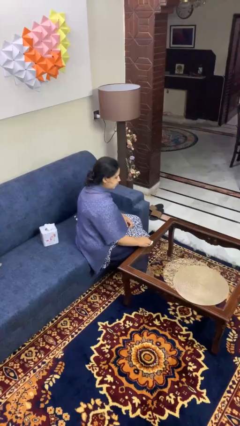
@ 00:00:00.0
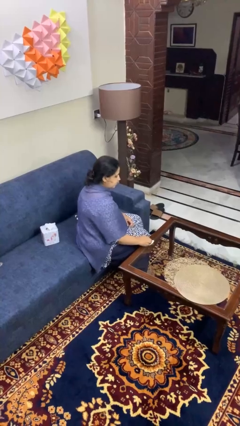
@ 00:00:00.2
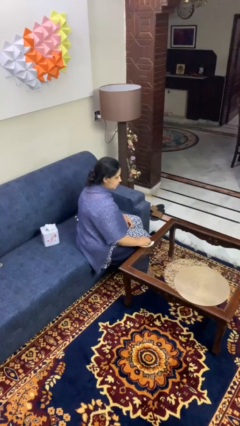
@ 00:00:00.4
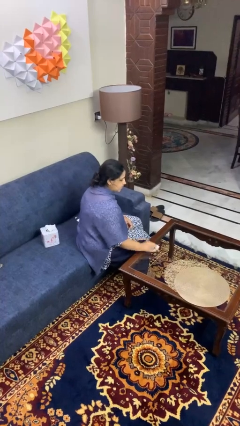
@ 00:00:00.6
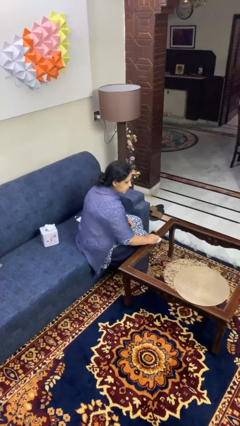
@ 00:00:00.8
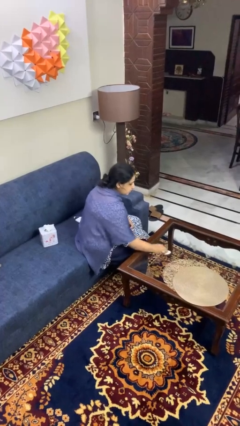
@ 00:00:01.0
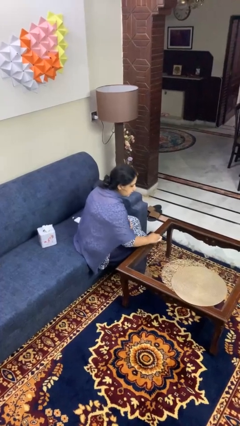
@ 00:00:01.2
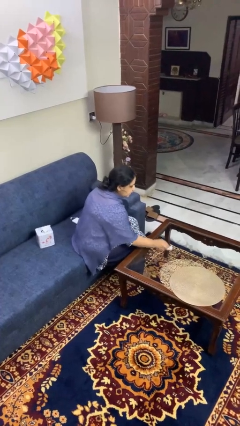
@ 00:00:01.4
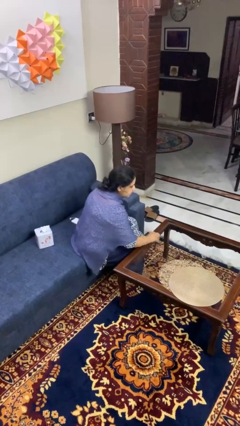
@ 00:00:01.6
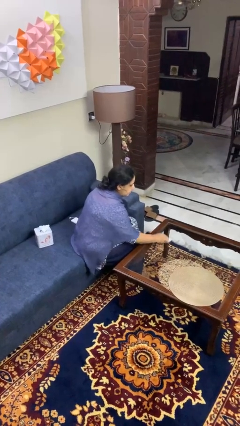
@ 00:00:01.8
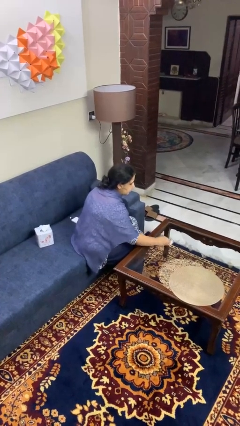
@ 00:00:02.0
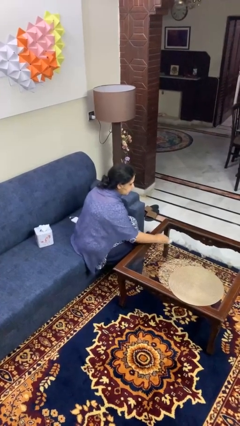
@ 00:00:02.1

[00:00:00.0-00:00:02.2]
person cleans table with rag

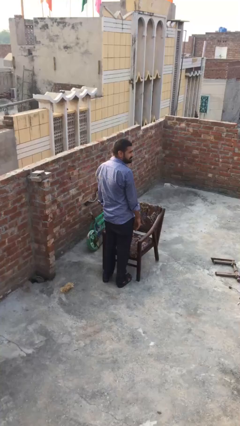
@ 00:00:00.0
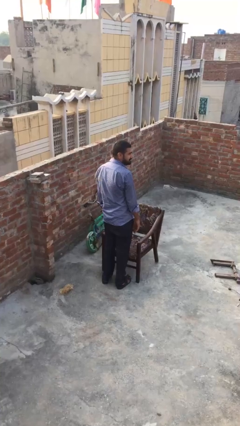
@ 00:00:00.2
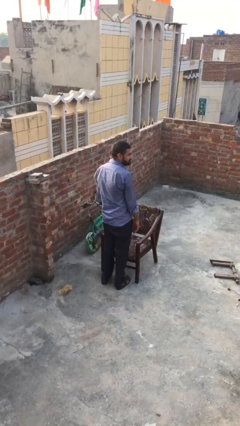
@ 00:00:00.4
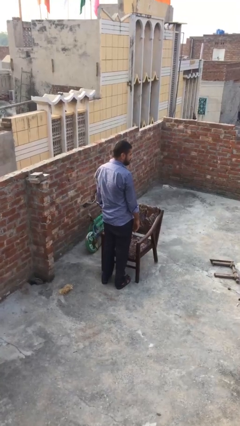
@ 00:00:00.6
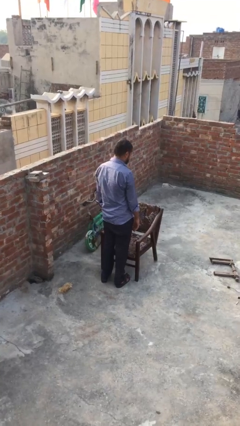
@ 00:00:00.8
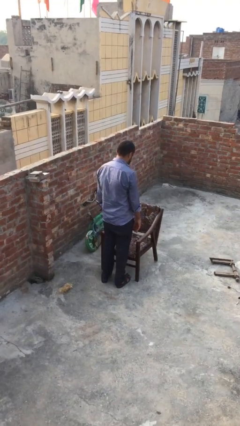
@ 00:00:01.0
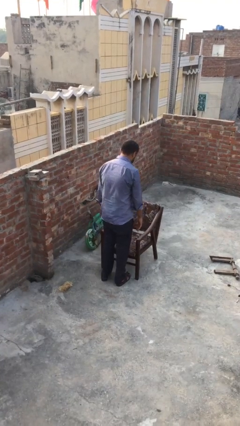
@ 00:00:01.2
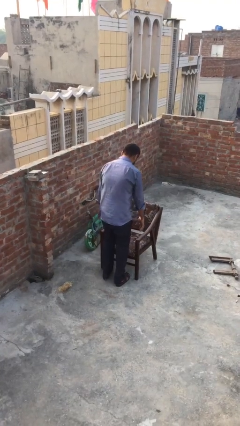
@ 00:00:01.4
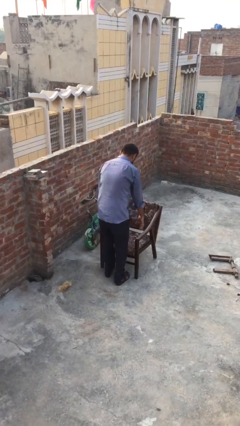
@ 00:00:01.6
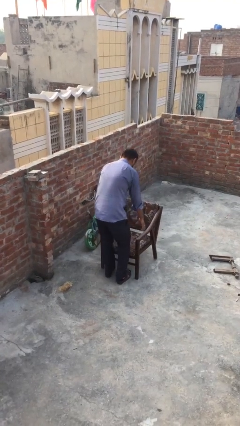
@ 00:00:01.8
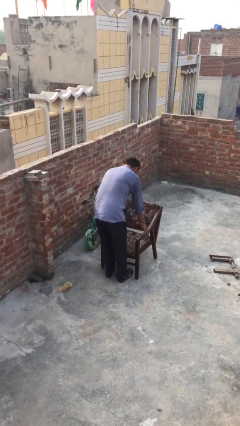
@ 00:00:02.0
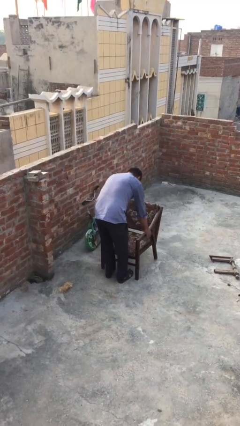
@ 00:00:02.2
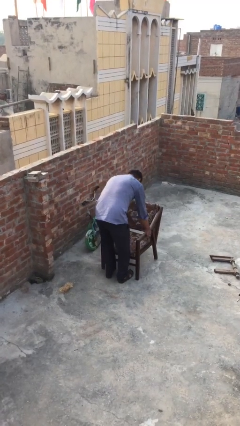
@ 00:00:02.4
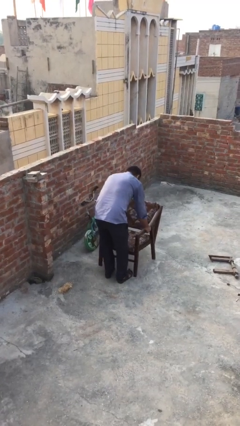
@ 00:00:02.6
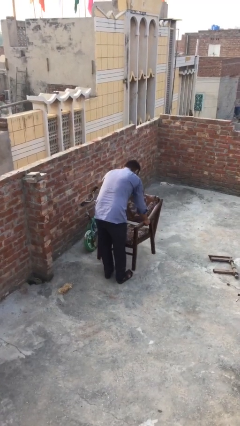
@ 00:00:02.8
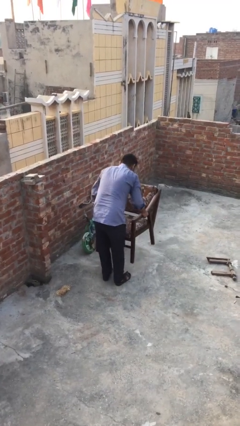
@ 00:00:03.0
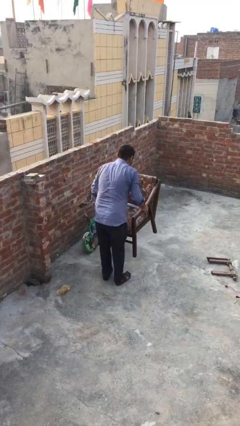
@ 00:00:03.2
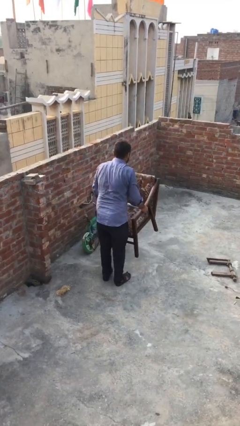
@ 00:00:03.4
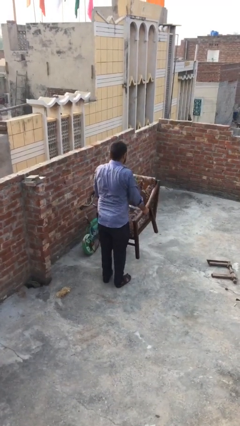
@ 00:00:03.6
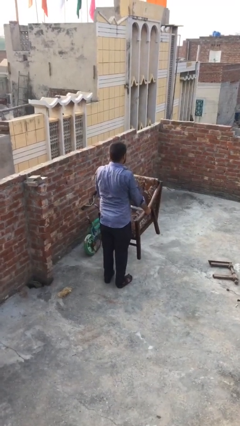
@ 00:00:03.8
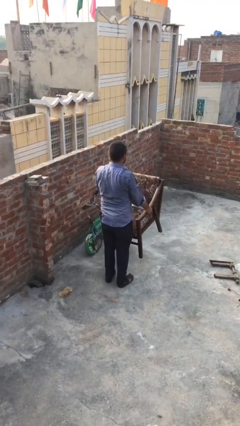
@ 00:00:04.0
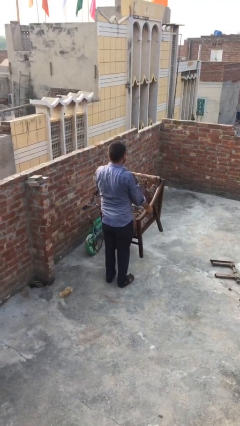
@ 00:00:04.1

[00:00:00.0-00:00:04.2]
person picks up object from floor

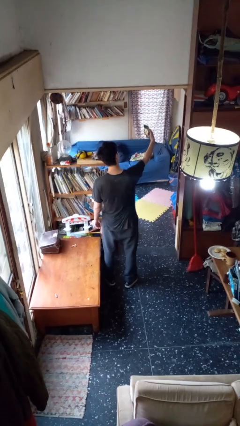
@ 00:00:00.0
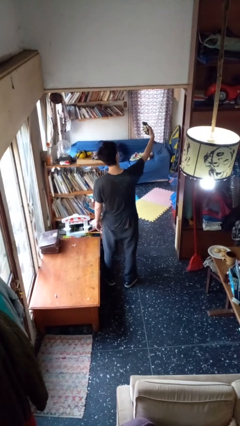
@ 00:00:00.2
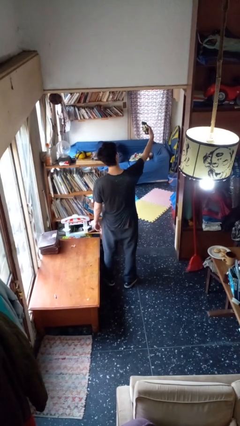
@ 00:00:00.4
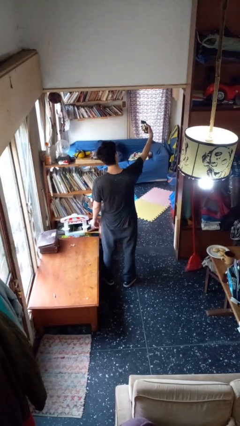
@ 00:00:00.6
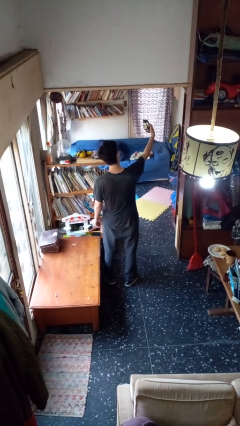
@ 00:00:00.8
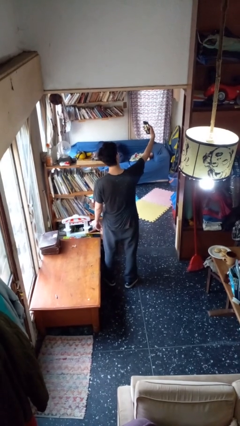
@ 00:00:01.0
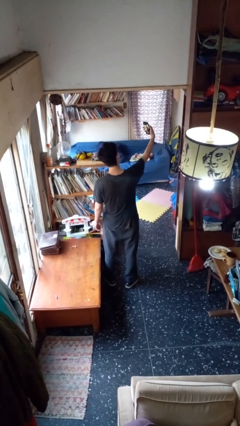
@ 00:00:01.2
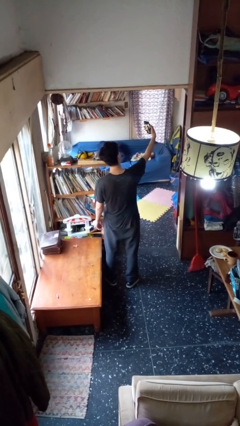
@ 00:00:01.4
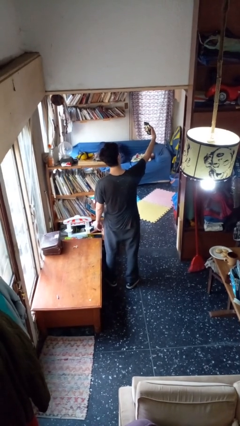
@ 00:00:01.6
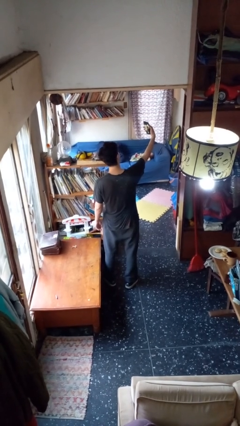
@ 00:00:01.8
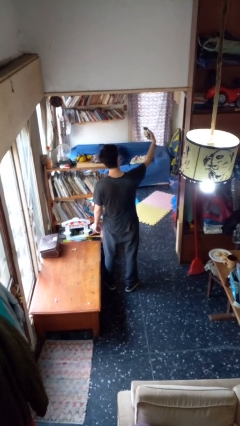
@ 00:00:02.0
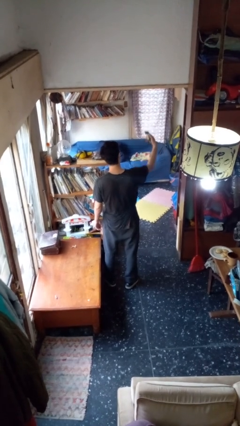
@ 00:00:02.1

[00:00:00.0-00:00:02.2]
person takes selfie

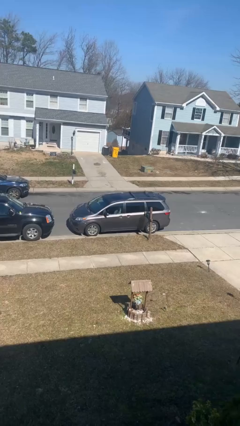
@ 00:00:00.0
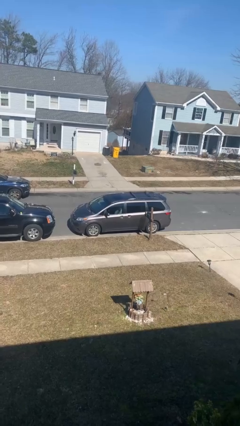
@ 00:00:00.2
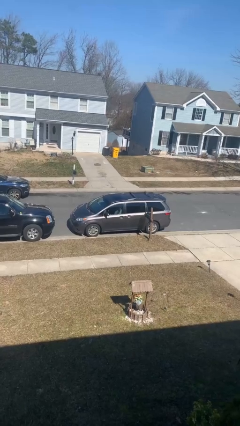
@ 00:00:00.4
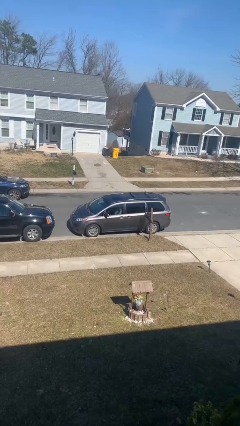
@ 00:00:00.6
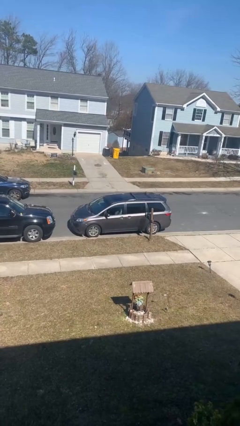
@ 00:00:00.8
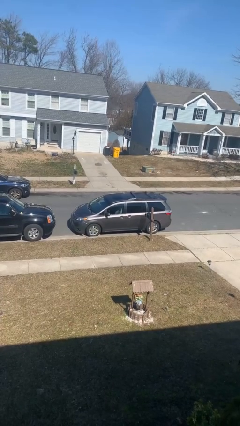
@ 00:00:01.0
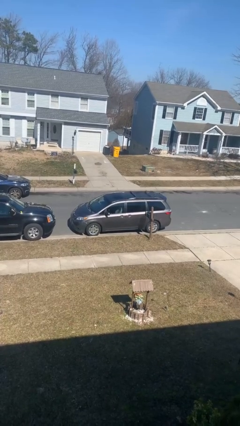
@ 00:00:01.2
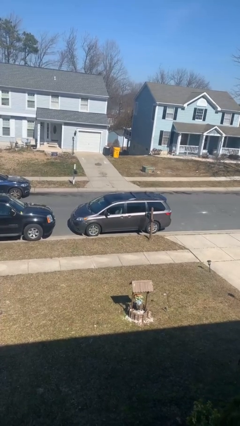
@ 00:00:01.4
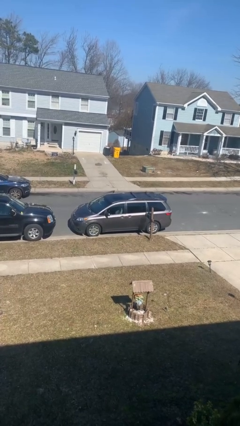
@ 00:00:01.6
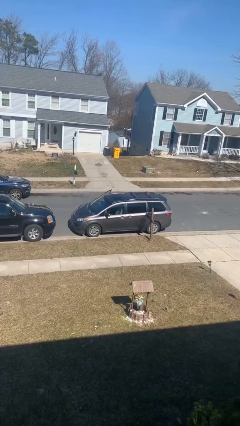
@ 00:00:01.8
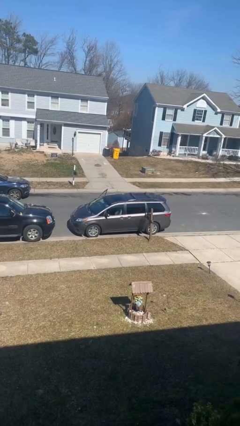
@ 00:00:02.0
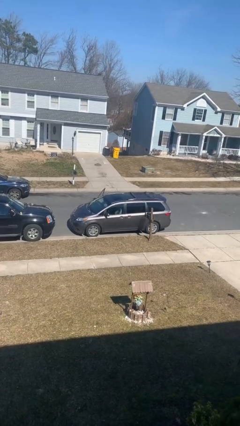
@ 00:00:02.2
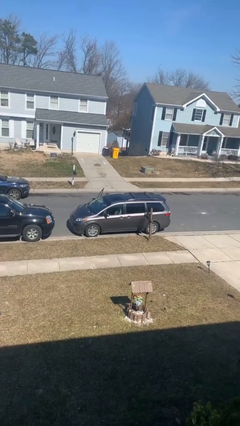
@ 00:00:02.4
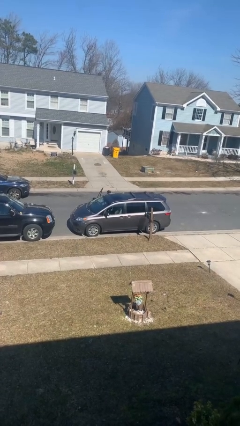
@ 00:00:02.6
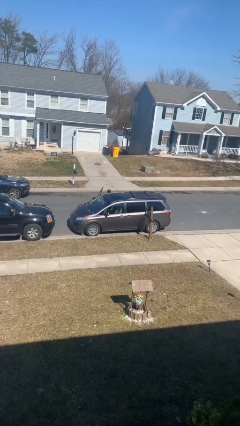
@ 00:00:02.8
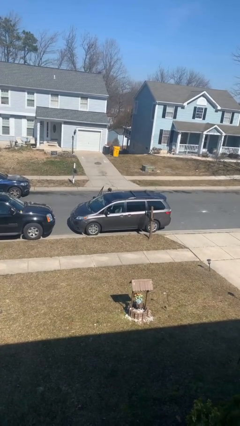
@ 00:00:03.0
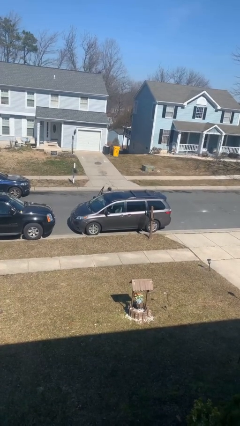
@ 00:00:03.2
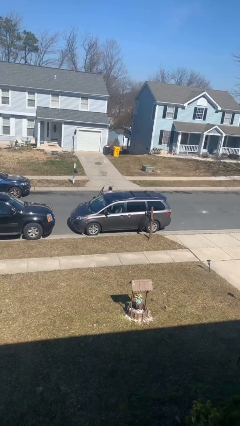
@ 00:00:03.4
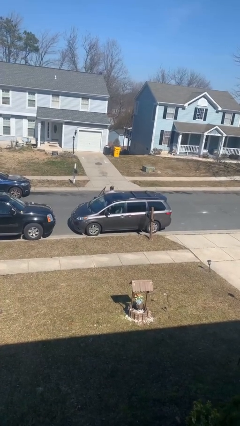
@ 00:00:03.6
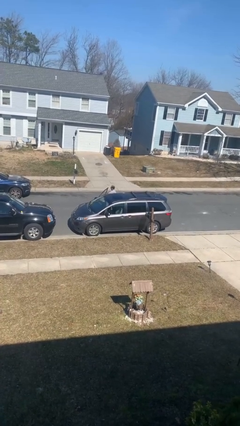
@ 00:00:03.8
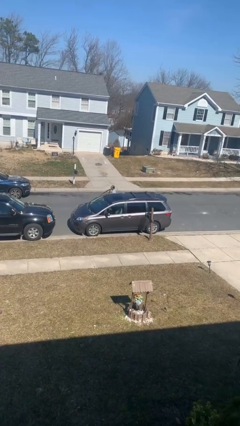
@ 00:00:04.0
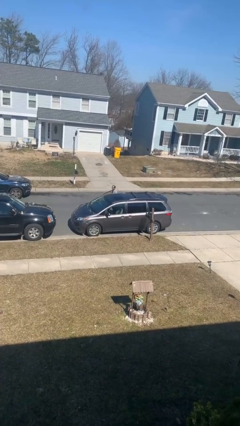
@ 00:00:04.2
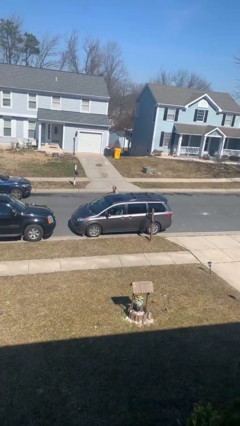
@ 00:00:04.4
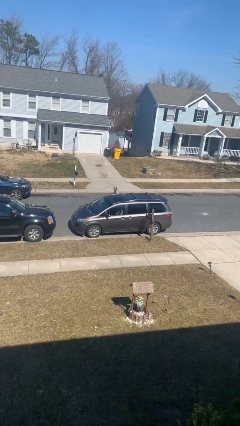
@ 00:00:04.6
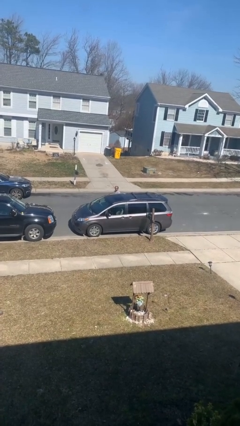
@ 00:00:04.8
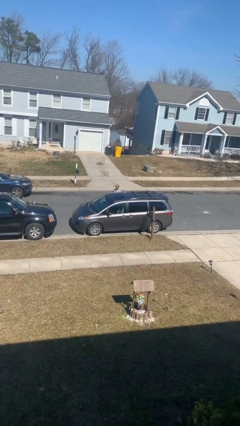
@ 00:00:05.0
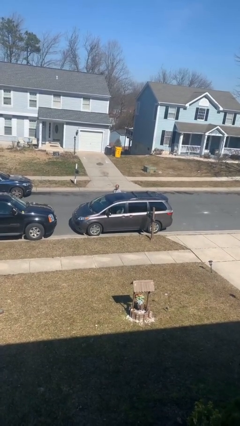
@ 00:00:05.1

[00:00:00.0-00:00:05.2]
car drops off person

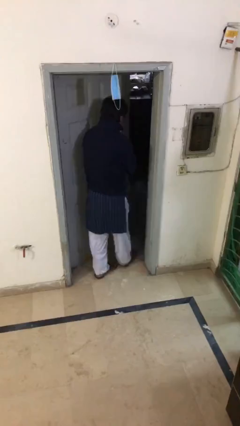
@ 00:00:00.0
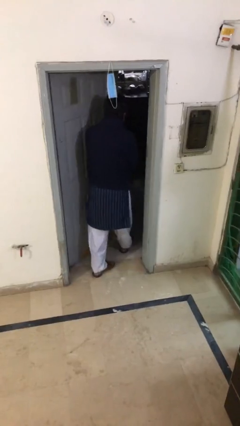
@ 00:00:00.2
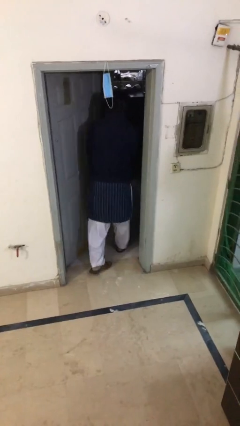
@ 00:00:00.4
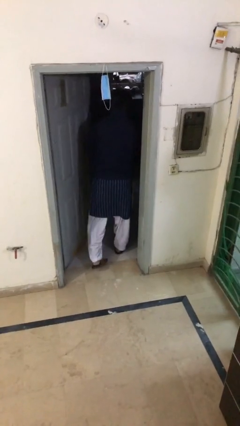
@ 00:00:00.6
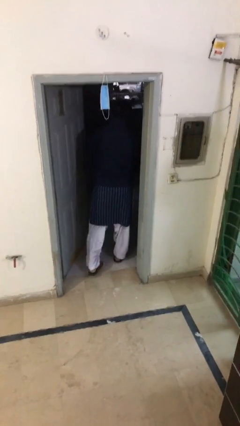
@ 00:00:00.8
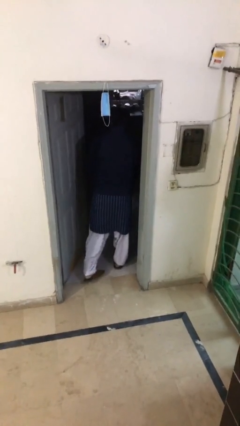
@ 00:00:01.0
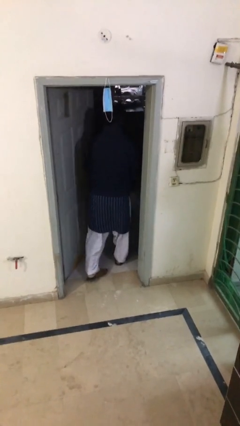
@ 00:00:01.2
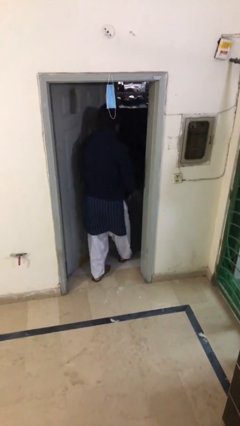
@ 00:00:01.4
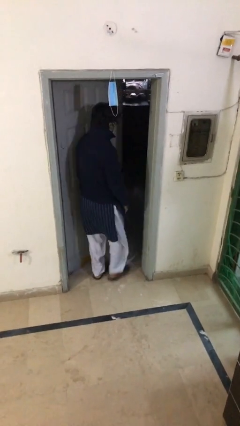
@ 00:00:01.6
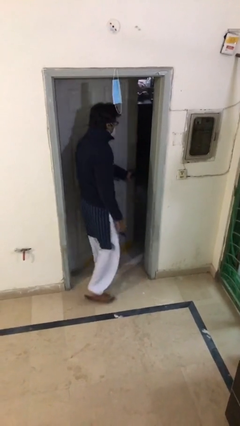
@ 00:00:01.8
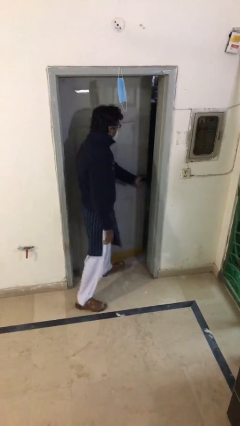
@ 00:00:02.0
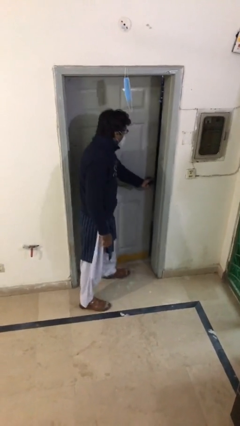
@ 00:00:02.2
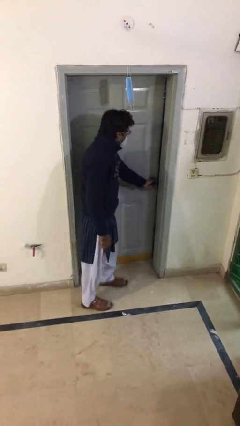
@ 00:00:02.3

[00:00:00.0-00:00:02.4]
person closes facility door

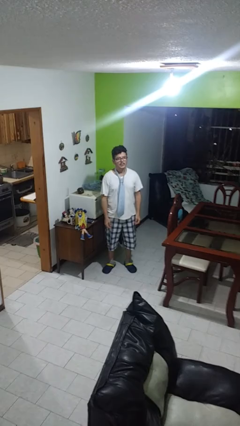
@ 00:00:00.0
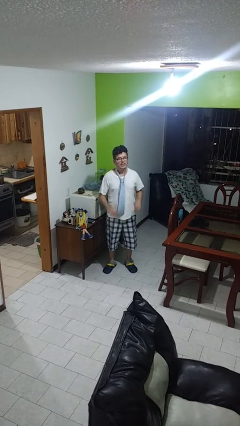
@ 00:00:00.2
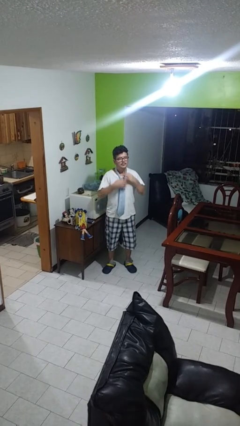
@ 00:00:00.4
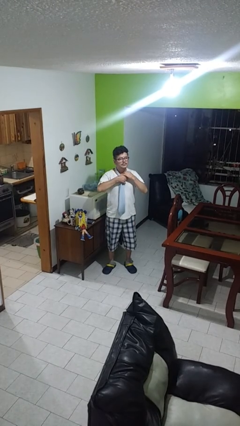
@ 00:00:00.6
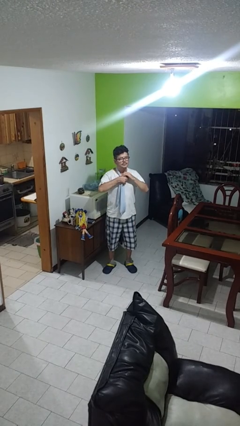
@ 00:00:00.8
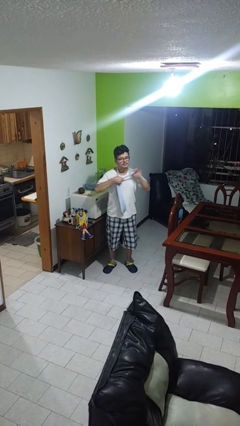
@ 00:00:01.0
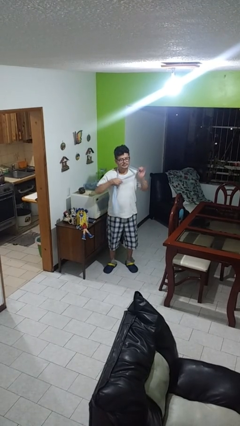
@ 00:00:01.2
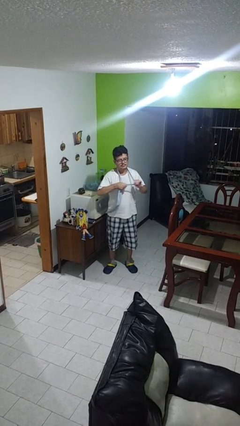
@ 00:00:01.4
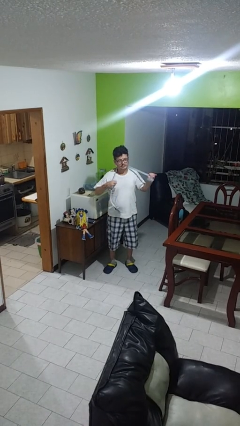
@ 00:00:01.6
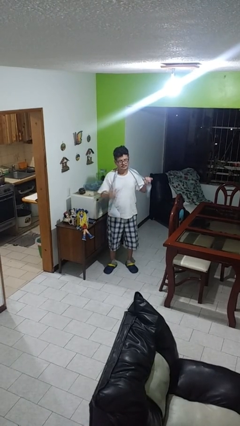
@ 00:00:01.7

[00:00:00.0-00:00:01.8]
person takes off necktie
